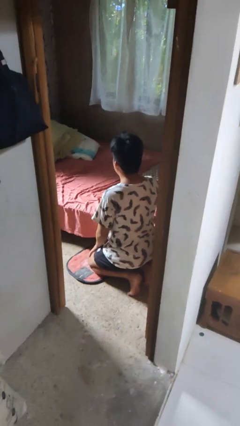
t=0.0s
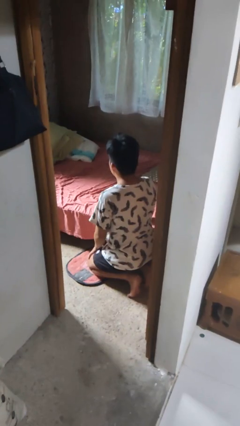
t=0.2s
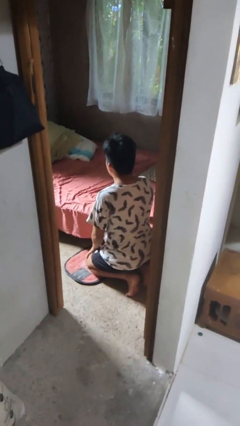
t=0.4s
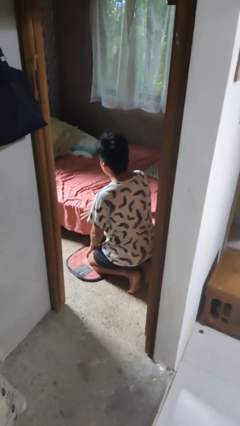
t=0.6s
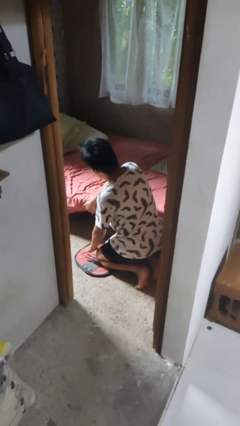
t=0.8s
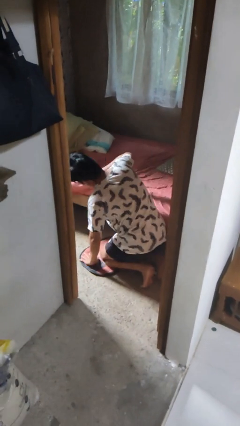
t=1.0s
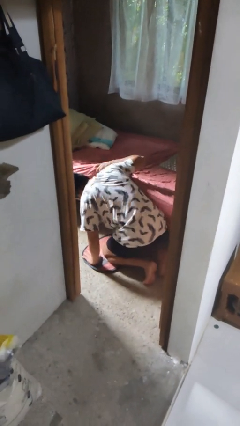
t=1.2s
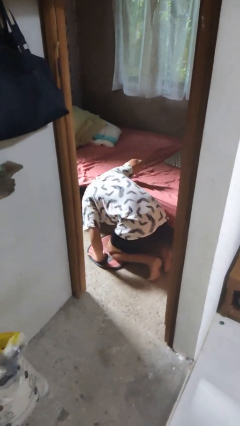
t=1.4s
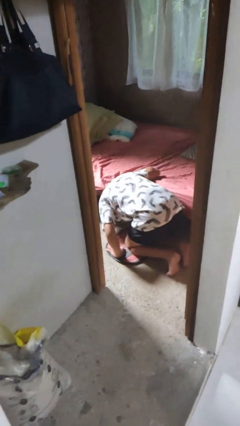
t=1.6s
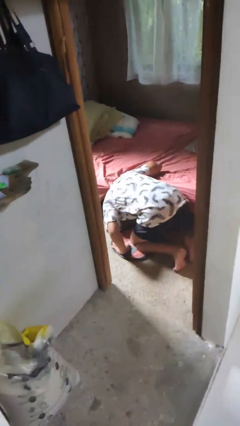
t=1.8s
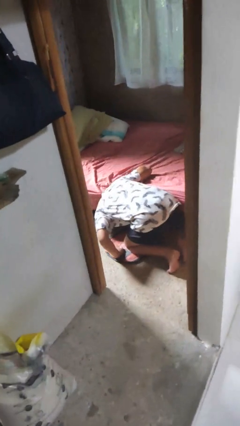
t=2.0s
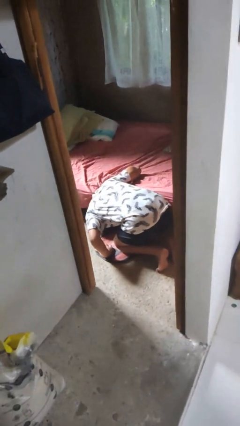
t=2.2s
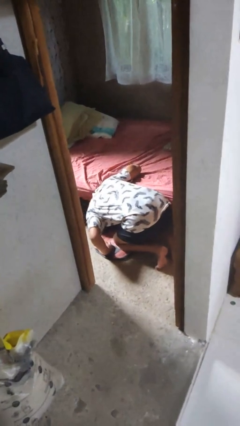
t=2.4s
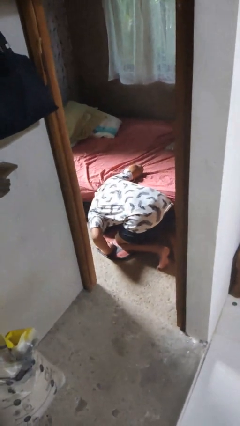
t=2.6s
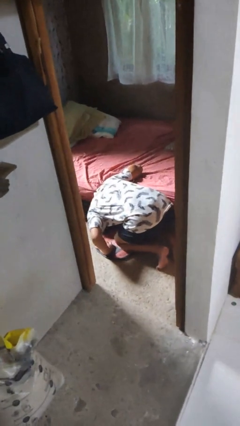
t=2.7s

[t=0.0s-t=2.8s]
person searches under bed

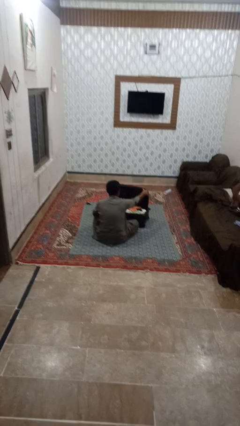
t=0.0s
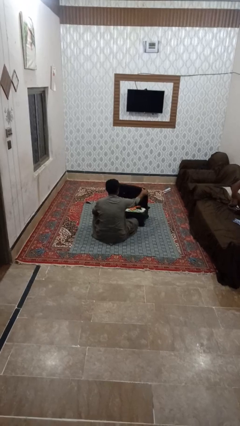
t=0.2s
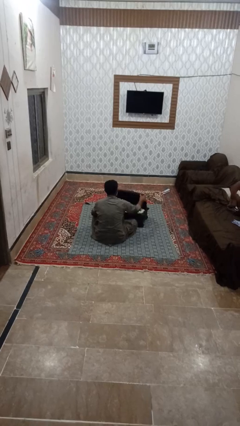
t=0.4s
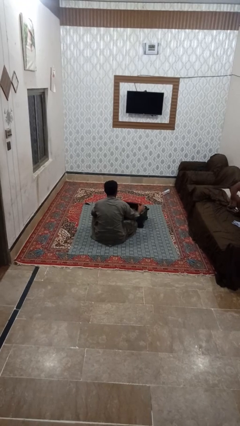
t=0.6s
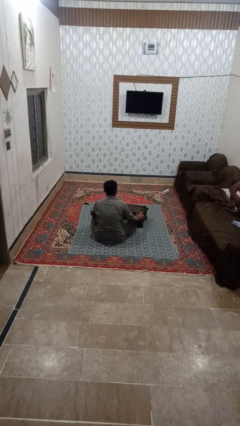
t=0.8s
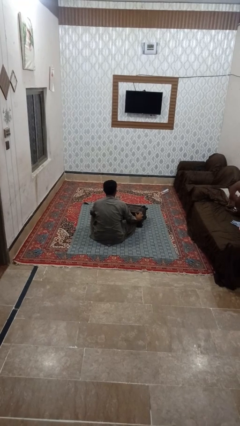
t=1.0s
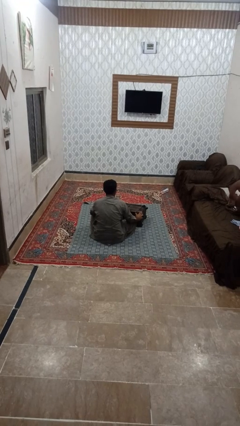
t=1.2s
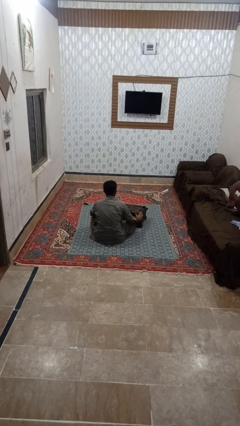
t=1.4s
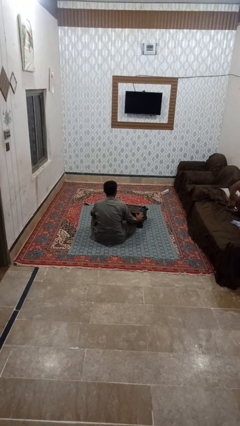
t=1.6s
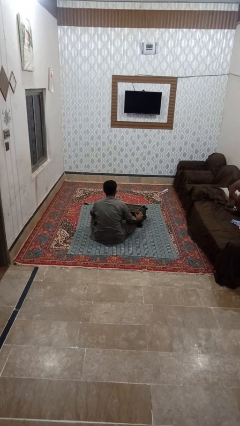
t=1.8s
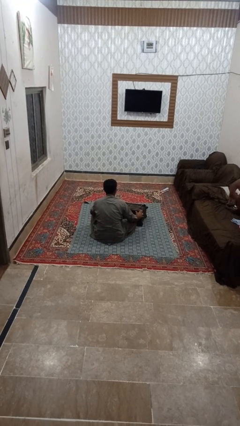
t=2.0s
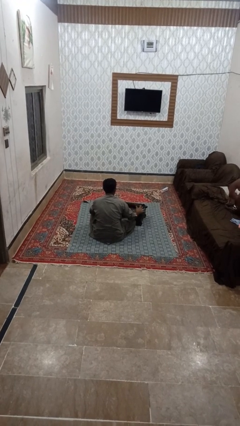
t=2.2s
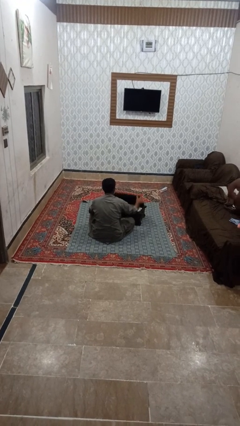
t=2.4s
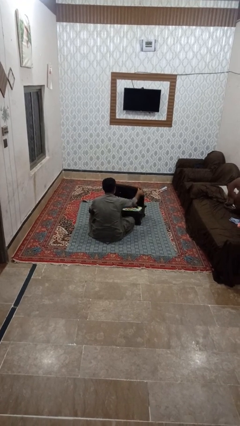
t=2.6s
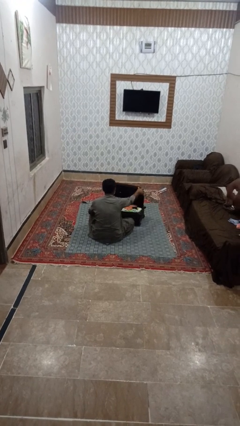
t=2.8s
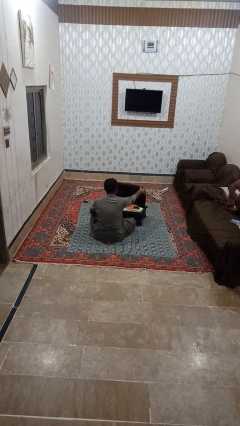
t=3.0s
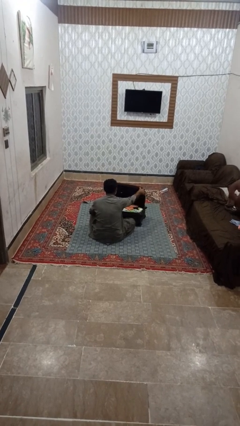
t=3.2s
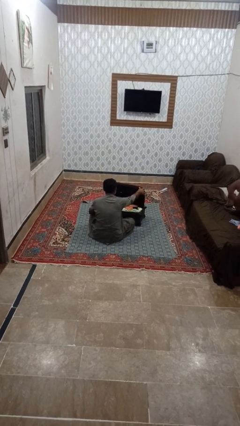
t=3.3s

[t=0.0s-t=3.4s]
person closes suitcase

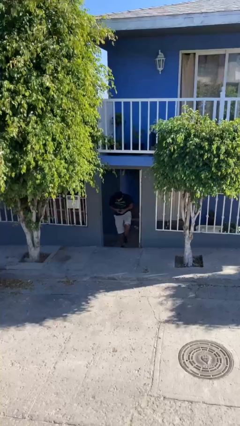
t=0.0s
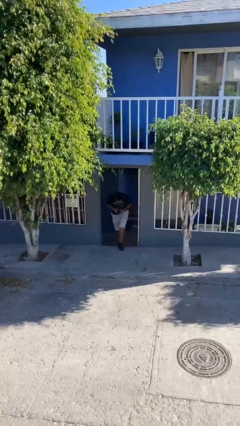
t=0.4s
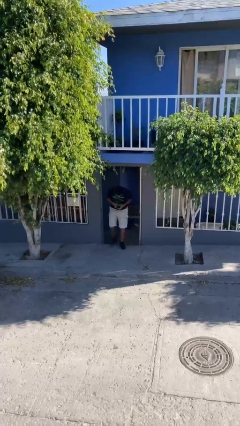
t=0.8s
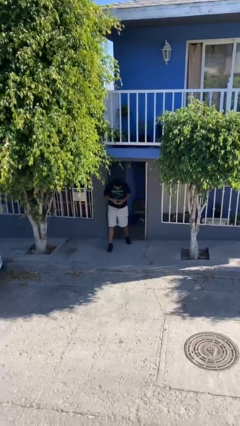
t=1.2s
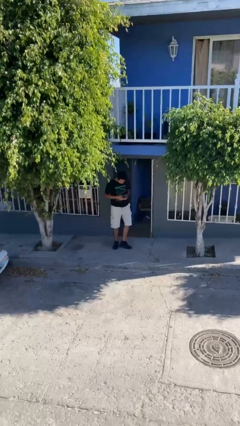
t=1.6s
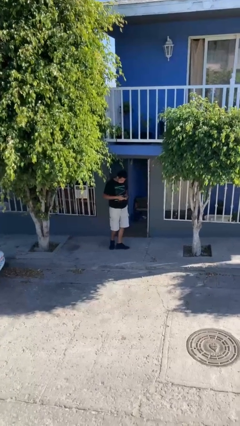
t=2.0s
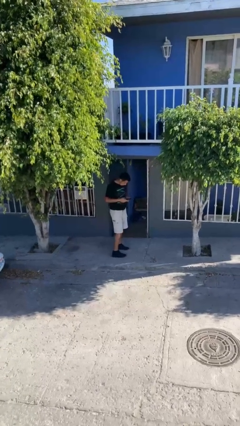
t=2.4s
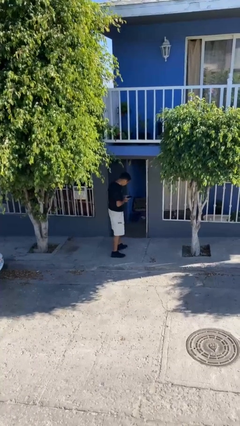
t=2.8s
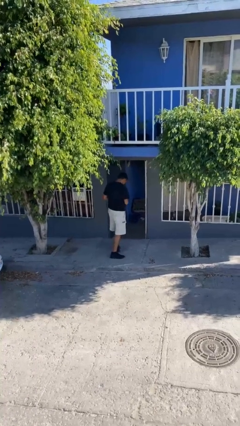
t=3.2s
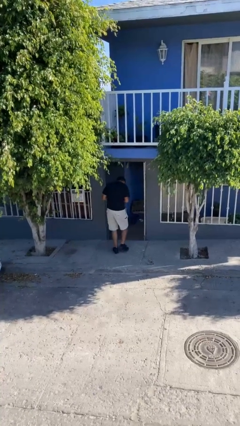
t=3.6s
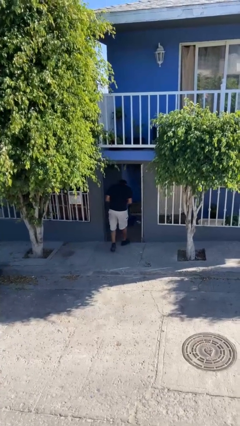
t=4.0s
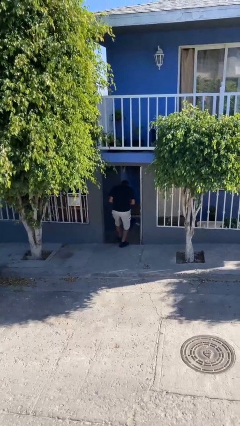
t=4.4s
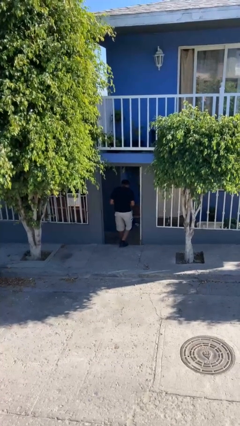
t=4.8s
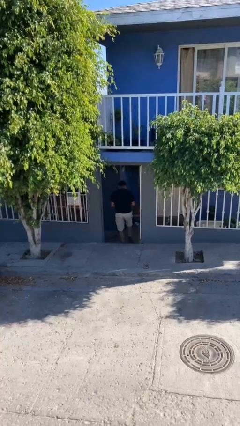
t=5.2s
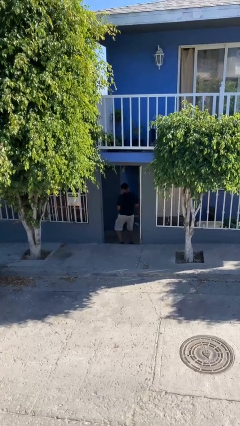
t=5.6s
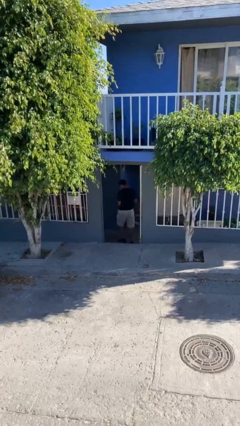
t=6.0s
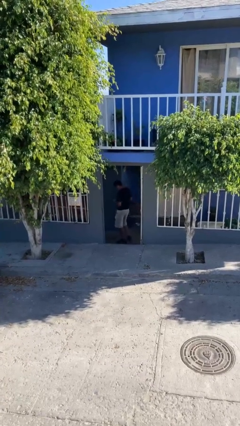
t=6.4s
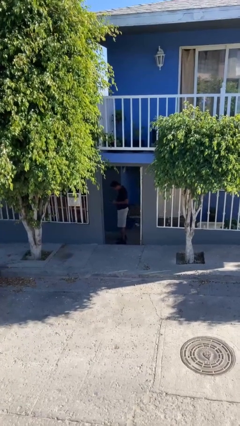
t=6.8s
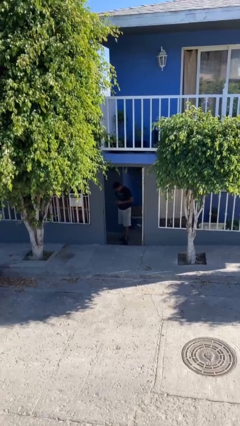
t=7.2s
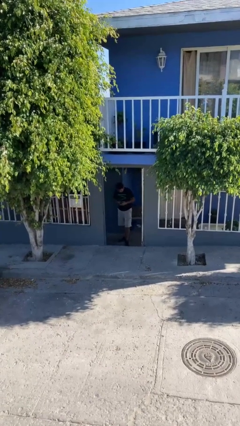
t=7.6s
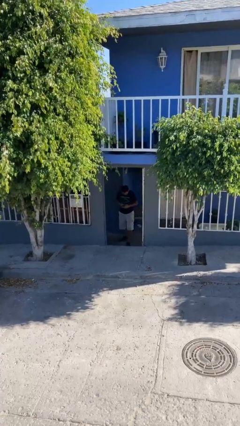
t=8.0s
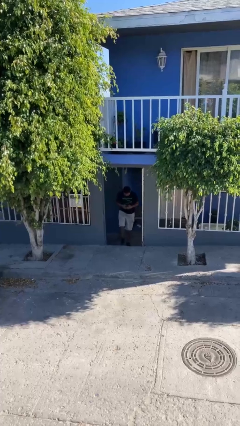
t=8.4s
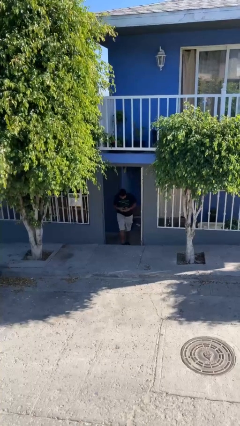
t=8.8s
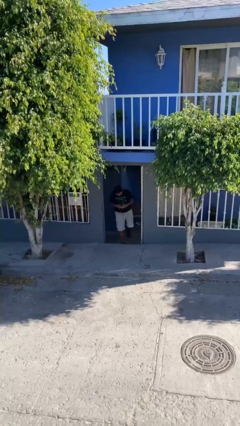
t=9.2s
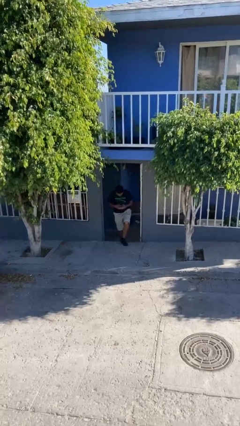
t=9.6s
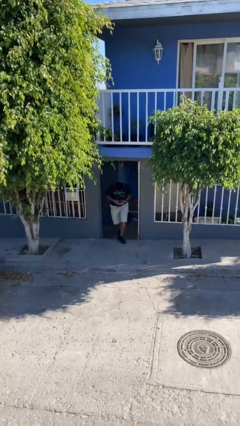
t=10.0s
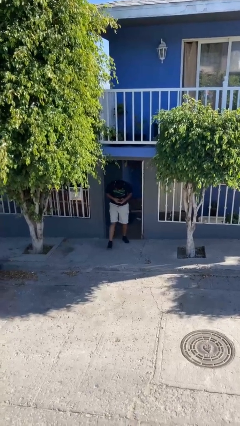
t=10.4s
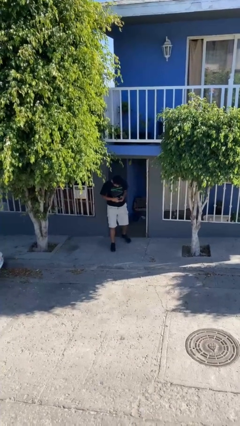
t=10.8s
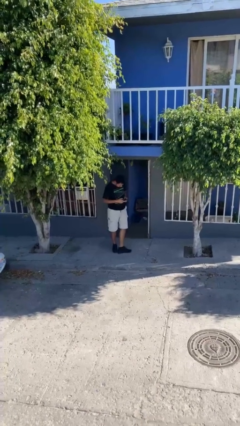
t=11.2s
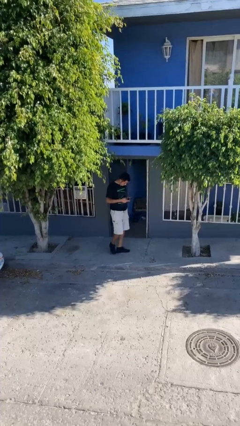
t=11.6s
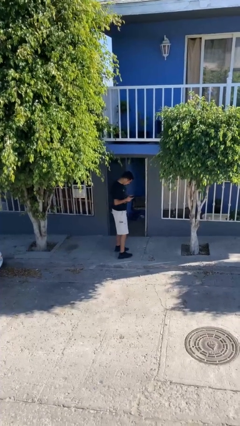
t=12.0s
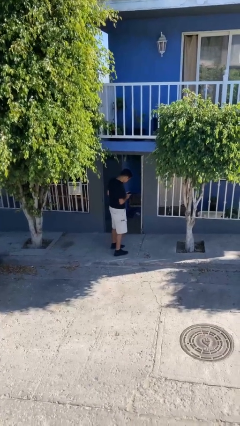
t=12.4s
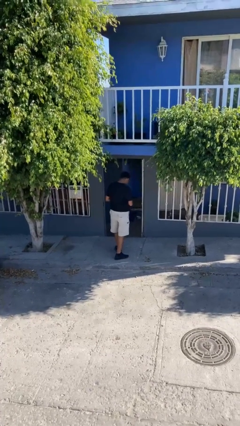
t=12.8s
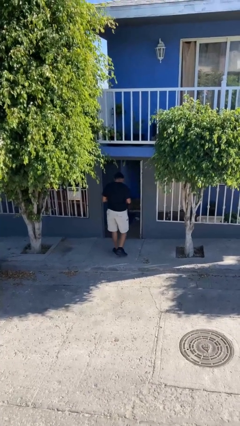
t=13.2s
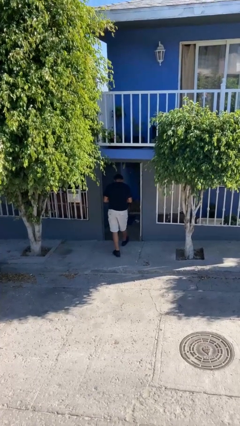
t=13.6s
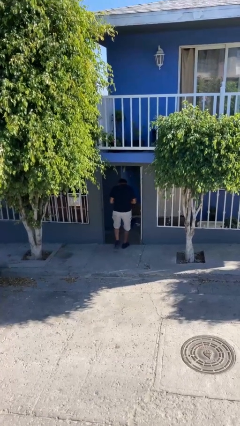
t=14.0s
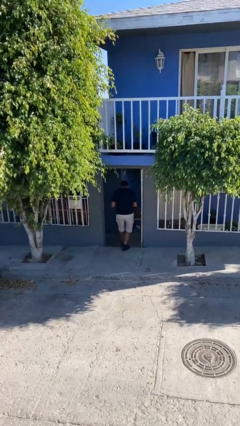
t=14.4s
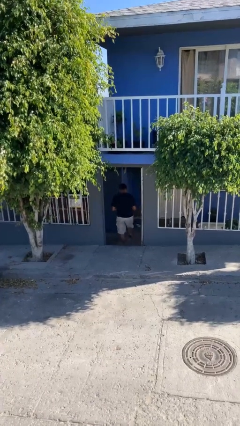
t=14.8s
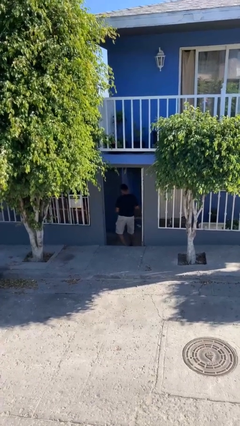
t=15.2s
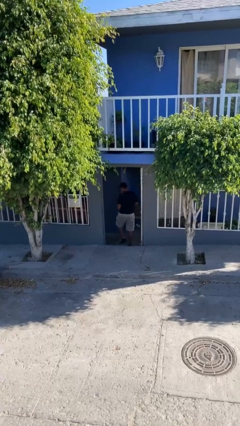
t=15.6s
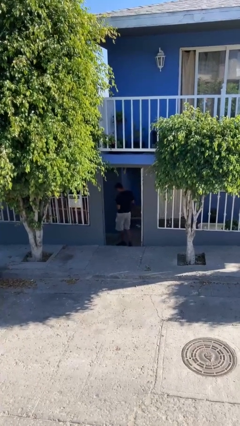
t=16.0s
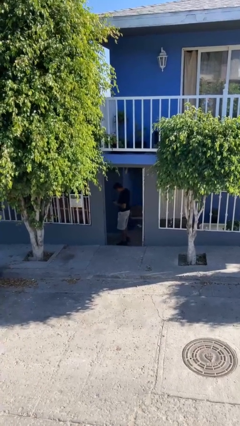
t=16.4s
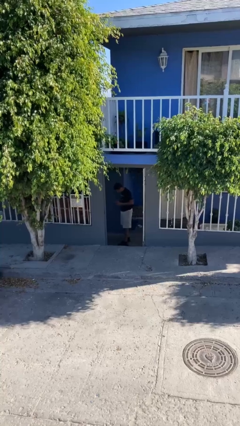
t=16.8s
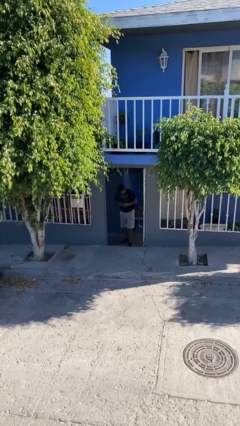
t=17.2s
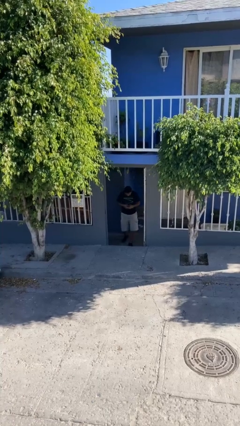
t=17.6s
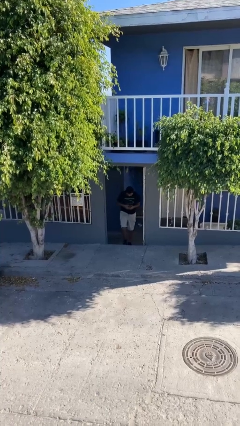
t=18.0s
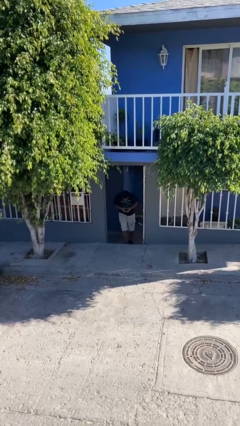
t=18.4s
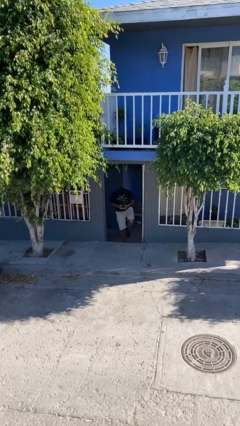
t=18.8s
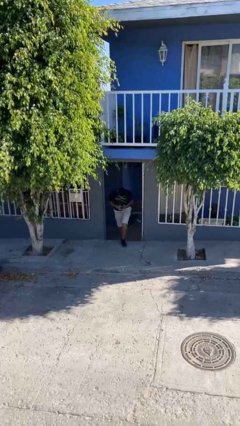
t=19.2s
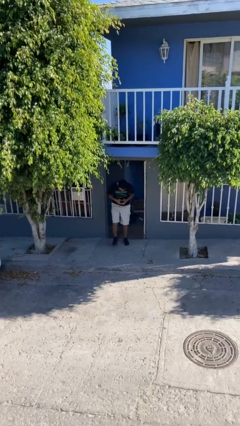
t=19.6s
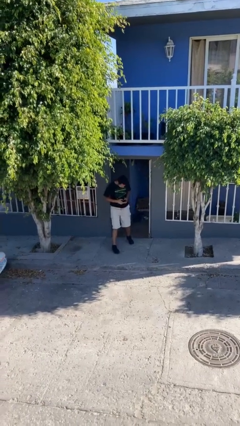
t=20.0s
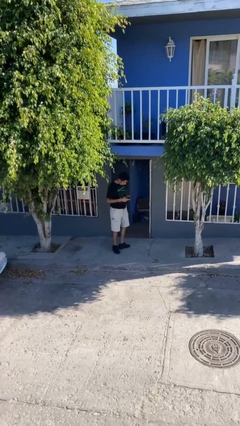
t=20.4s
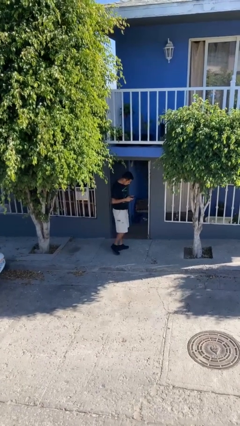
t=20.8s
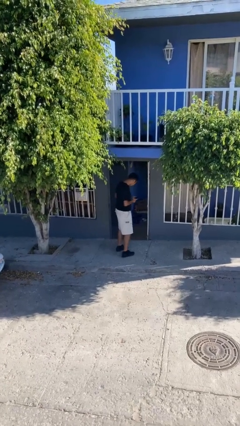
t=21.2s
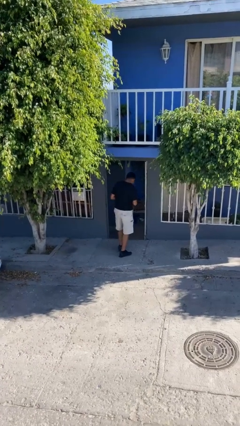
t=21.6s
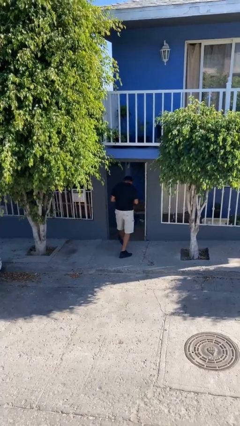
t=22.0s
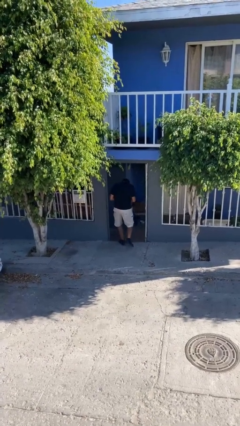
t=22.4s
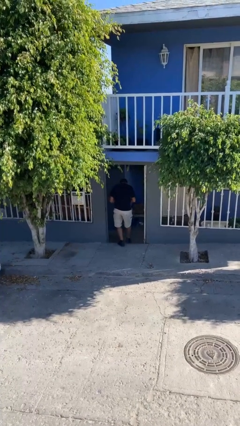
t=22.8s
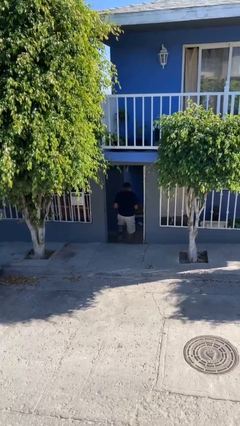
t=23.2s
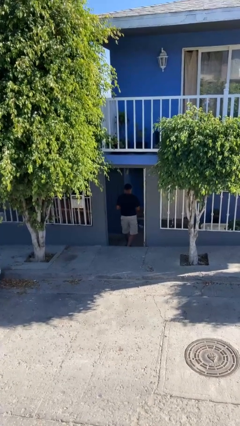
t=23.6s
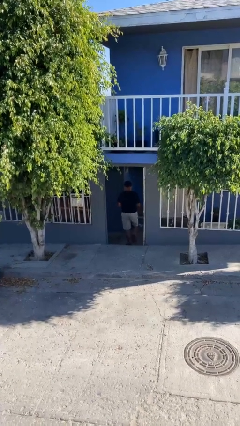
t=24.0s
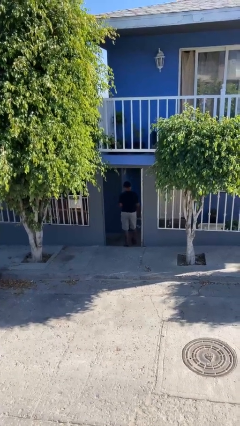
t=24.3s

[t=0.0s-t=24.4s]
person texts on phone
